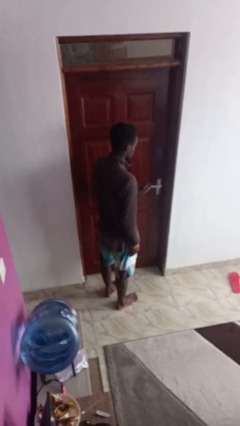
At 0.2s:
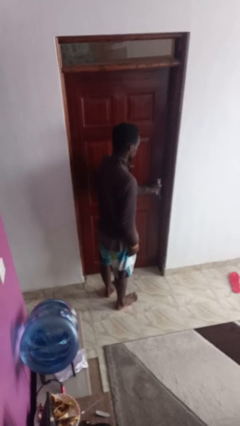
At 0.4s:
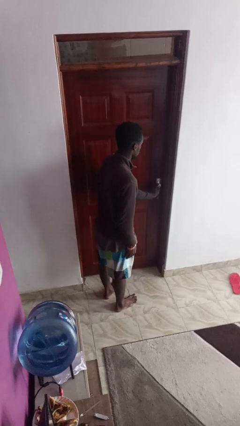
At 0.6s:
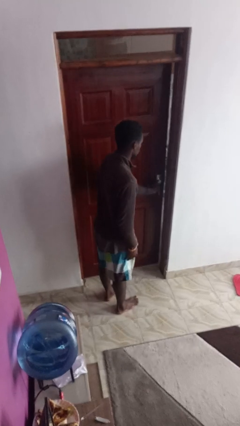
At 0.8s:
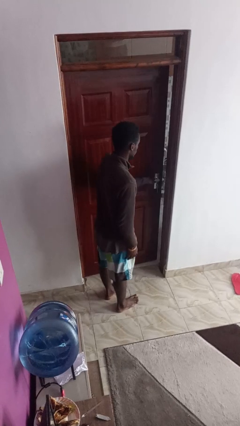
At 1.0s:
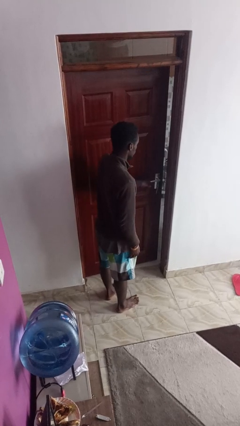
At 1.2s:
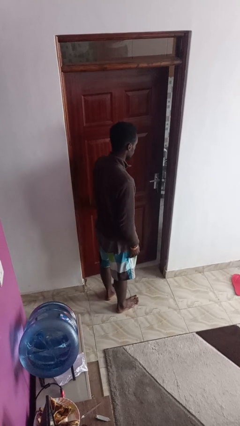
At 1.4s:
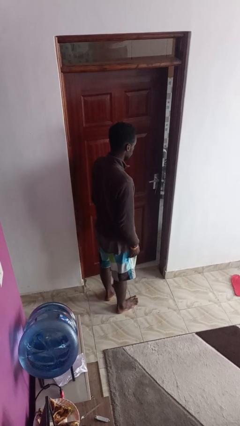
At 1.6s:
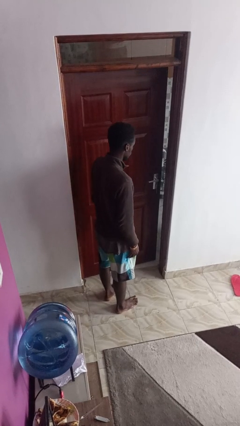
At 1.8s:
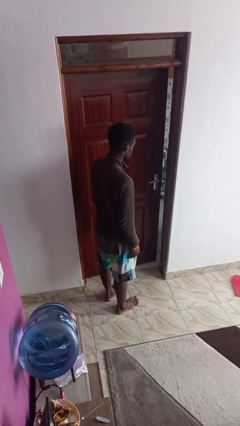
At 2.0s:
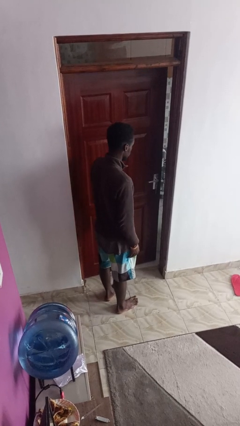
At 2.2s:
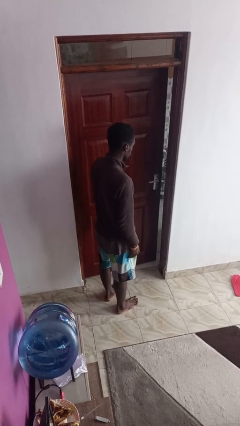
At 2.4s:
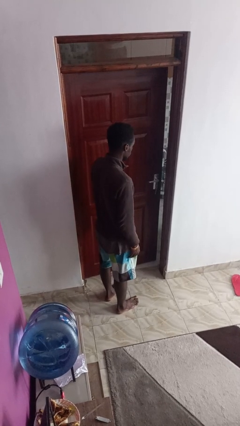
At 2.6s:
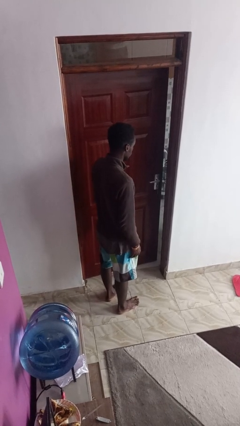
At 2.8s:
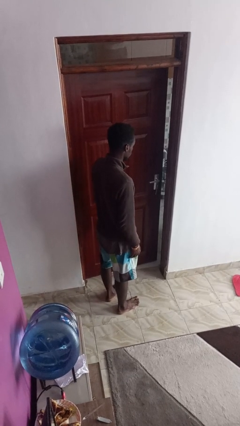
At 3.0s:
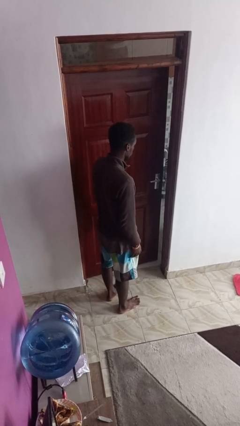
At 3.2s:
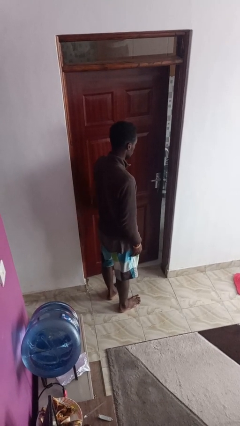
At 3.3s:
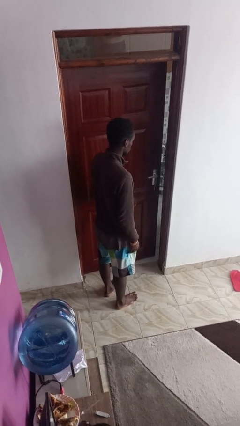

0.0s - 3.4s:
person opens facility door

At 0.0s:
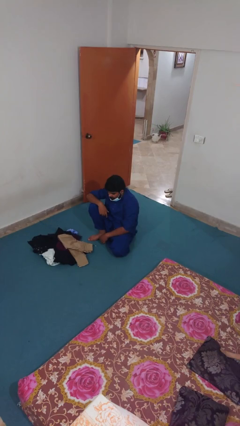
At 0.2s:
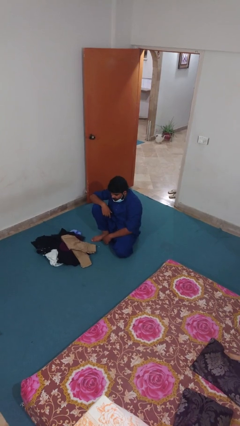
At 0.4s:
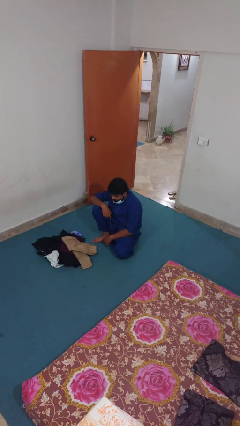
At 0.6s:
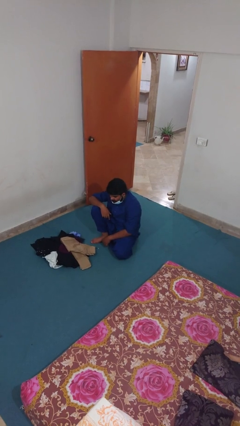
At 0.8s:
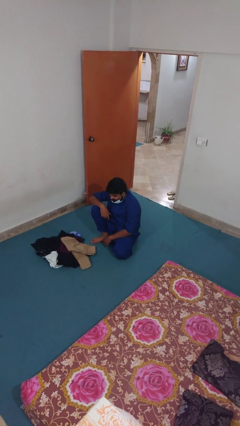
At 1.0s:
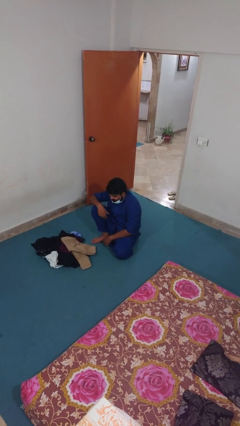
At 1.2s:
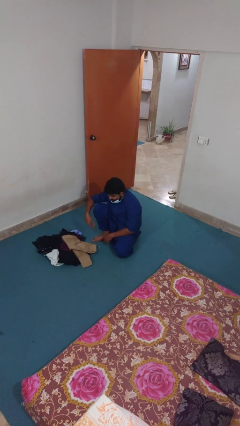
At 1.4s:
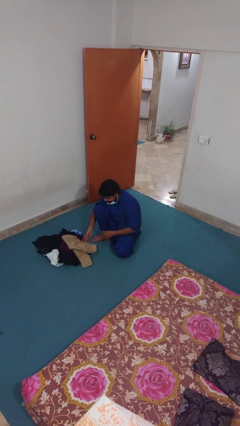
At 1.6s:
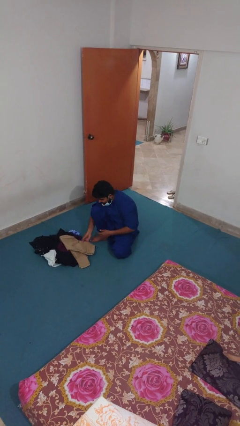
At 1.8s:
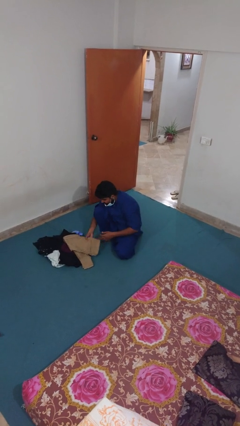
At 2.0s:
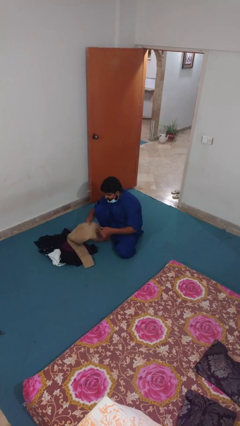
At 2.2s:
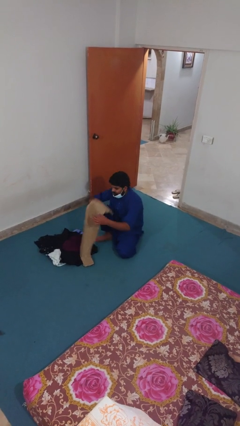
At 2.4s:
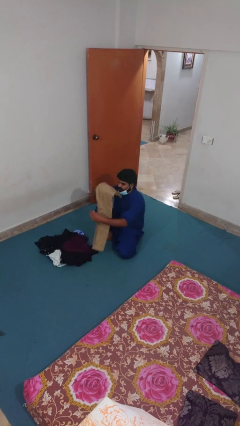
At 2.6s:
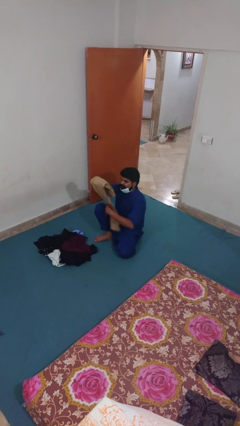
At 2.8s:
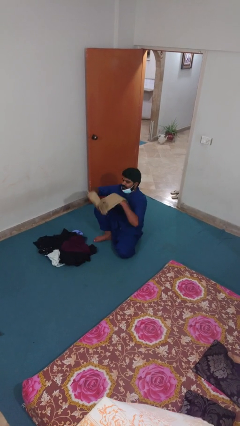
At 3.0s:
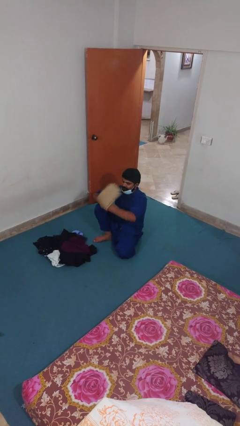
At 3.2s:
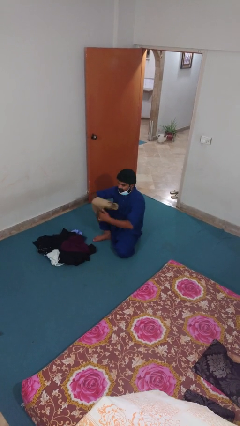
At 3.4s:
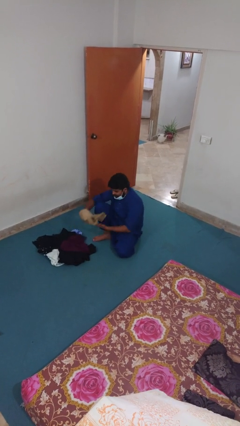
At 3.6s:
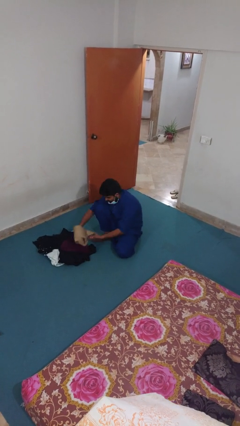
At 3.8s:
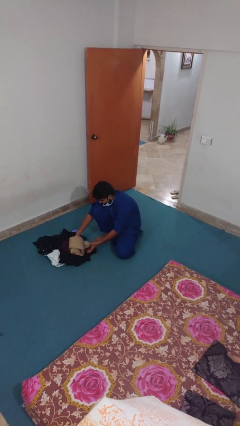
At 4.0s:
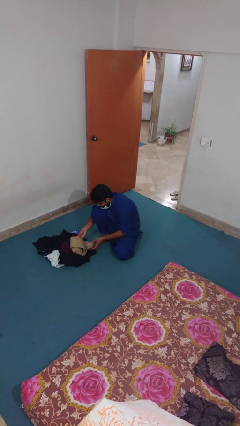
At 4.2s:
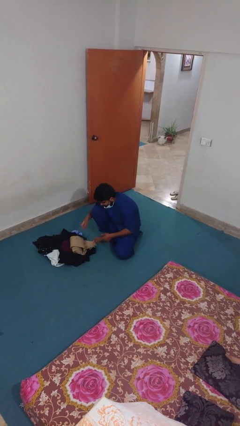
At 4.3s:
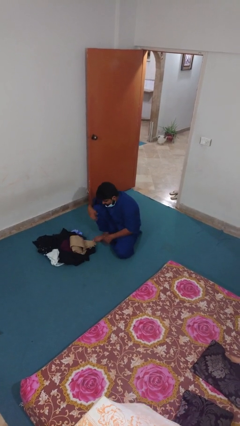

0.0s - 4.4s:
person folds pants

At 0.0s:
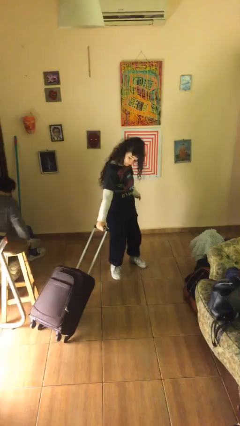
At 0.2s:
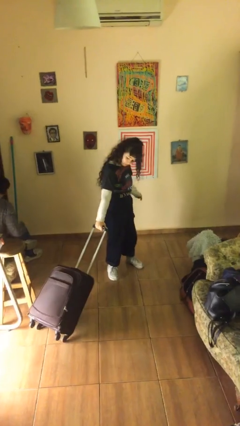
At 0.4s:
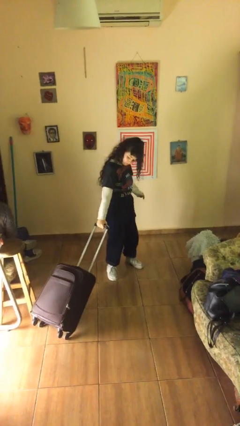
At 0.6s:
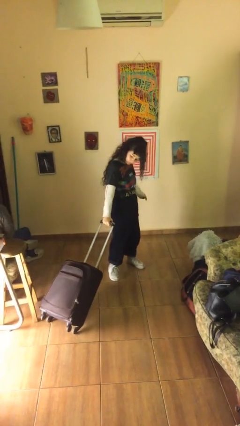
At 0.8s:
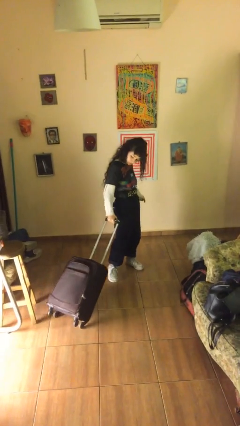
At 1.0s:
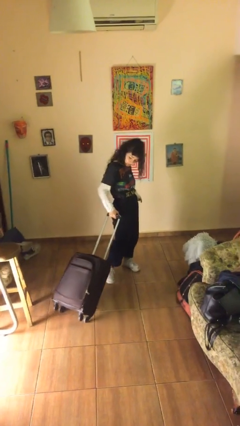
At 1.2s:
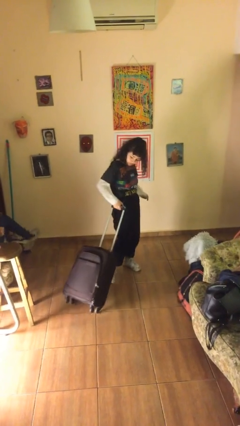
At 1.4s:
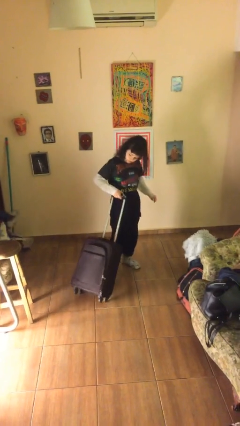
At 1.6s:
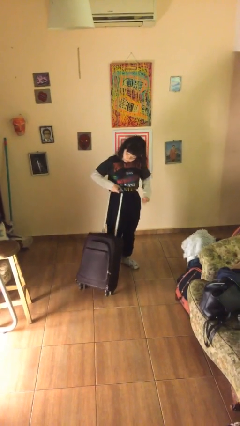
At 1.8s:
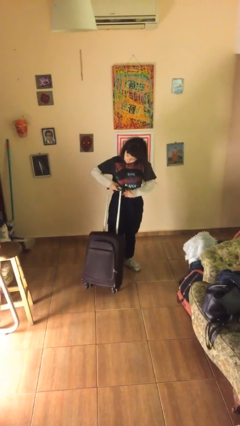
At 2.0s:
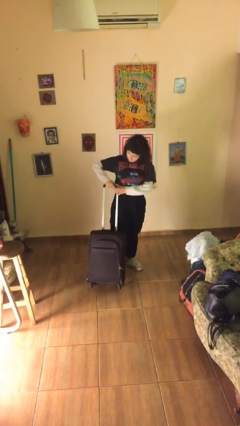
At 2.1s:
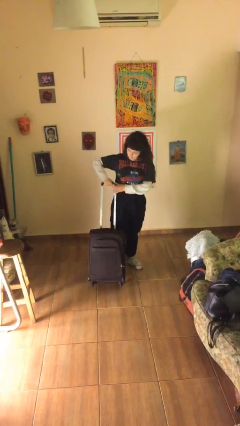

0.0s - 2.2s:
person pulls wheeled cart

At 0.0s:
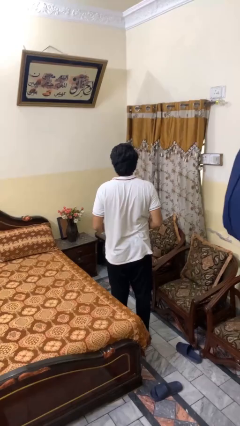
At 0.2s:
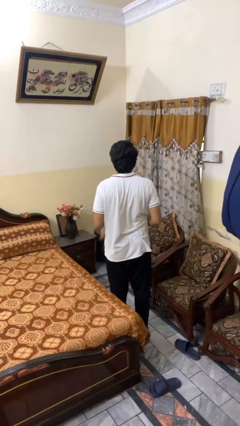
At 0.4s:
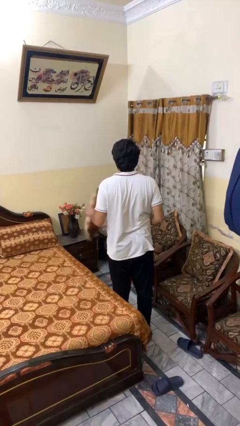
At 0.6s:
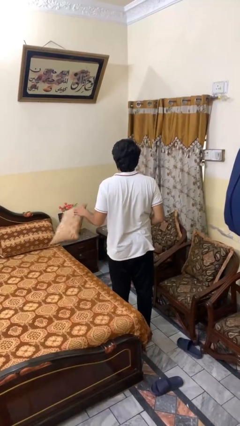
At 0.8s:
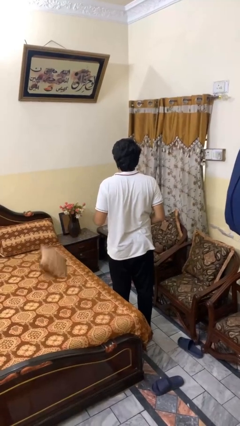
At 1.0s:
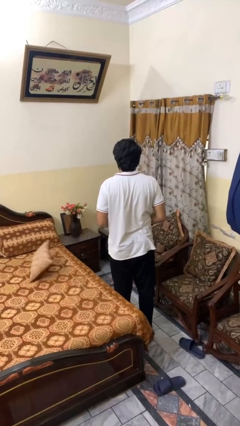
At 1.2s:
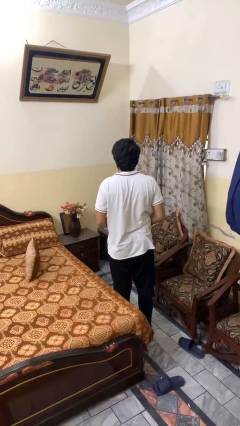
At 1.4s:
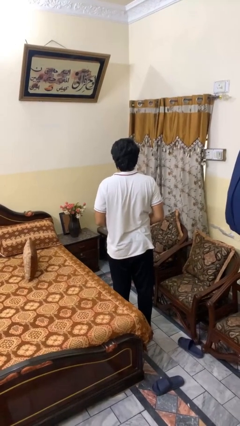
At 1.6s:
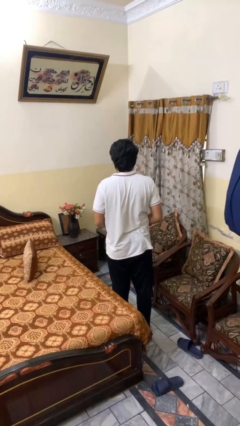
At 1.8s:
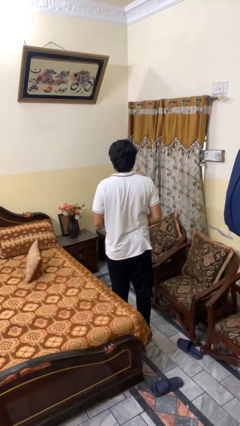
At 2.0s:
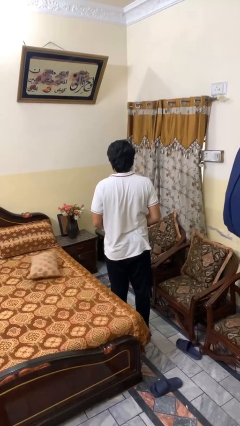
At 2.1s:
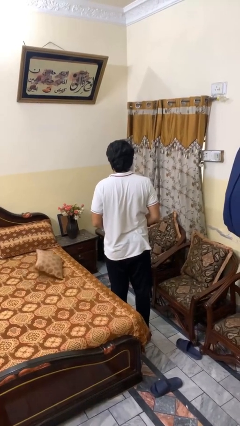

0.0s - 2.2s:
person throws object on bed

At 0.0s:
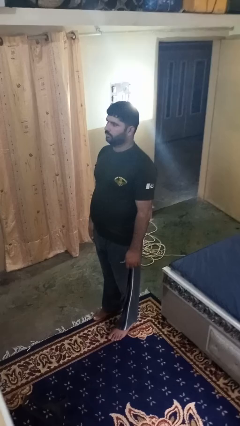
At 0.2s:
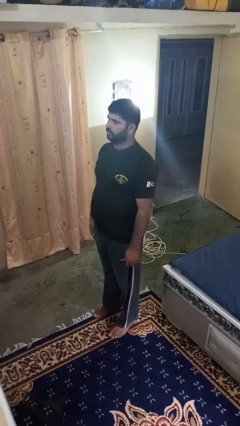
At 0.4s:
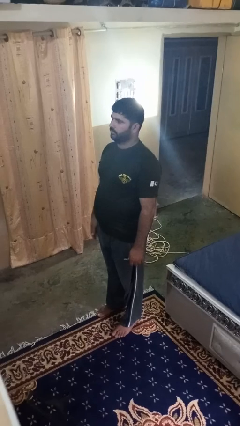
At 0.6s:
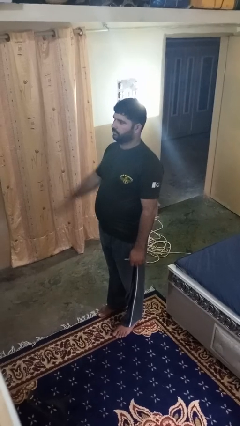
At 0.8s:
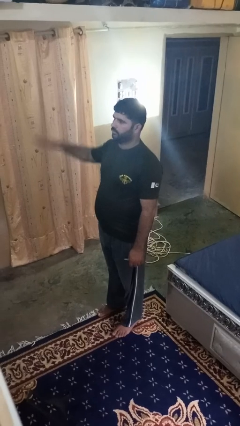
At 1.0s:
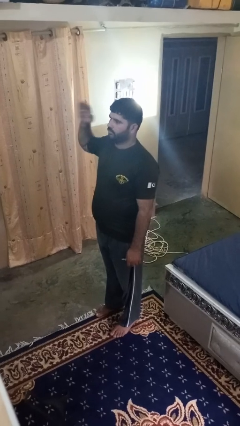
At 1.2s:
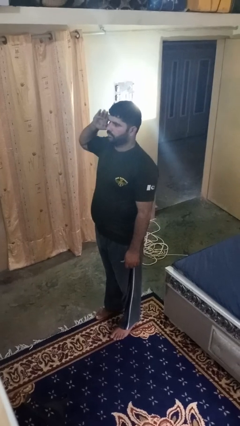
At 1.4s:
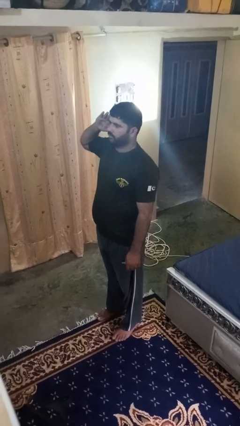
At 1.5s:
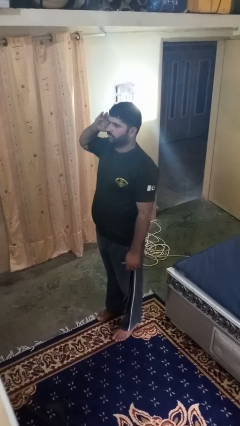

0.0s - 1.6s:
person salutes

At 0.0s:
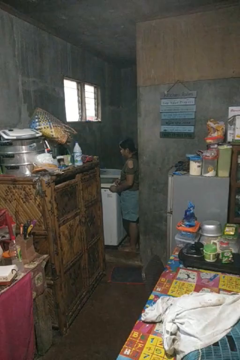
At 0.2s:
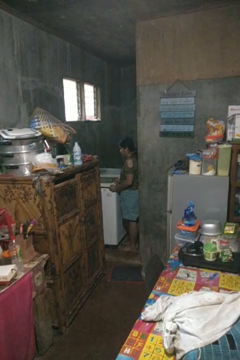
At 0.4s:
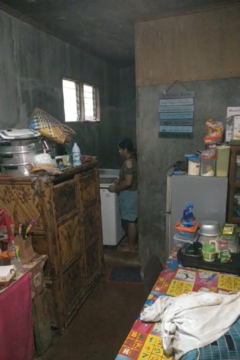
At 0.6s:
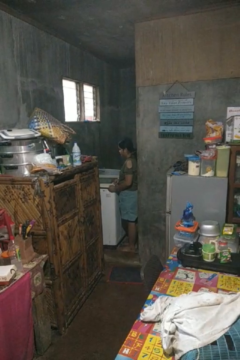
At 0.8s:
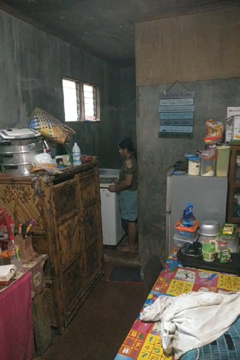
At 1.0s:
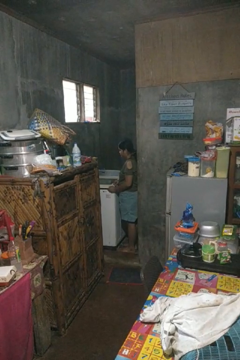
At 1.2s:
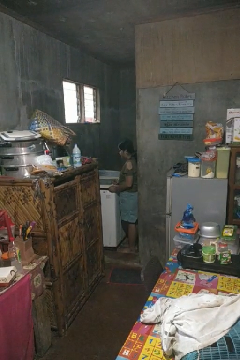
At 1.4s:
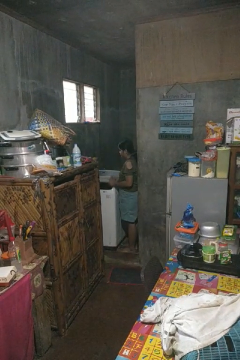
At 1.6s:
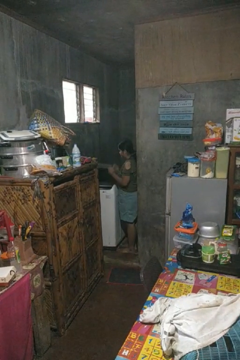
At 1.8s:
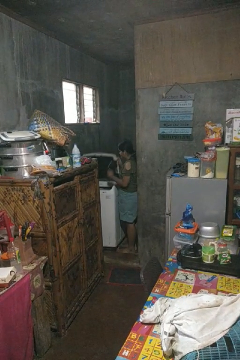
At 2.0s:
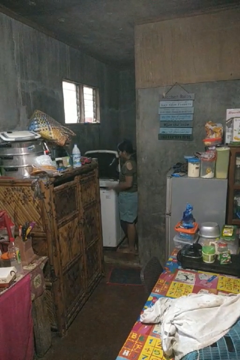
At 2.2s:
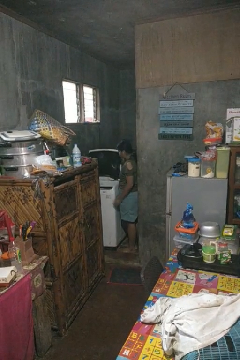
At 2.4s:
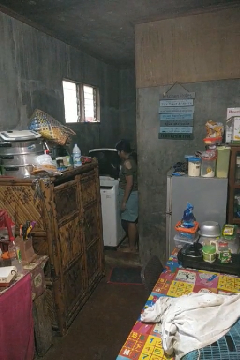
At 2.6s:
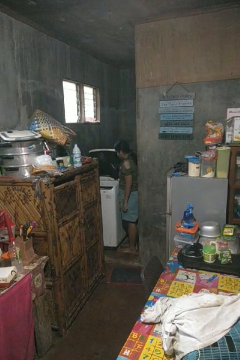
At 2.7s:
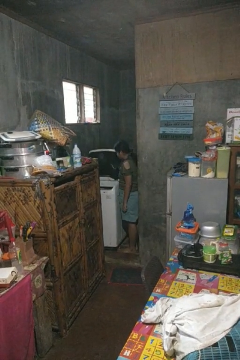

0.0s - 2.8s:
person opens clothes washer

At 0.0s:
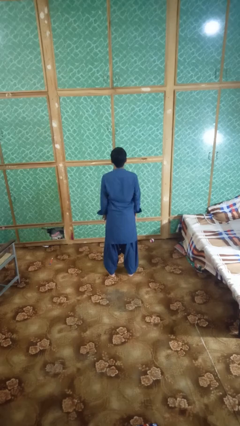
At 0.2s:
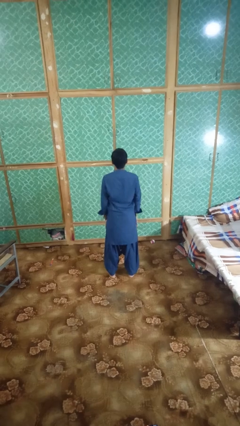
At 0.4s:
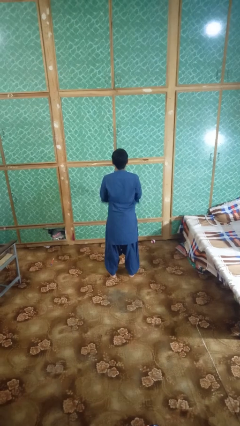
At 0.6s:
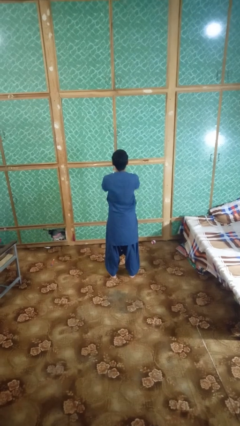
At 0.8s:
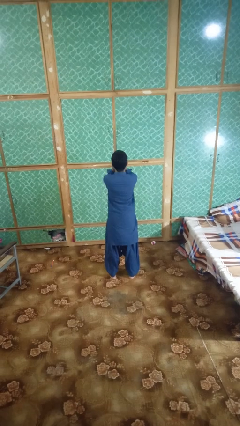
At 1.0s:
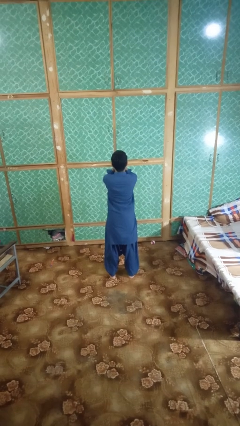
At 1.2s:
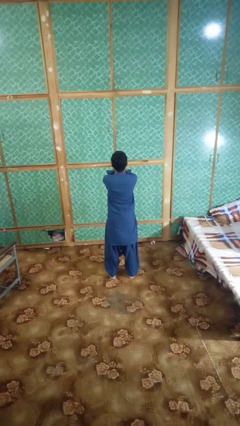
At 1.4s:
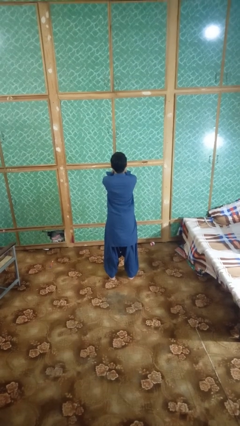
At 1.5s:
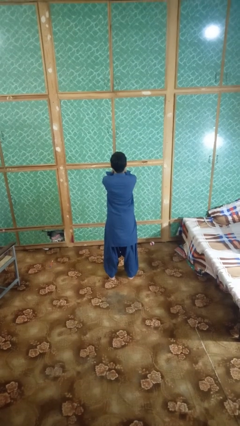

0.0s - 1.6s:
person covers face with hands
